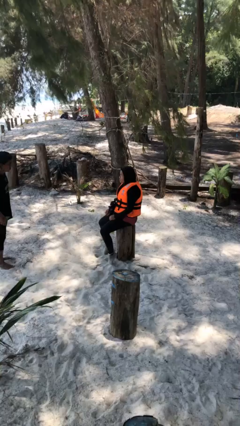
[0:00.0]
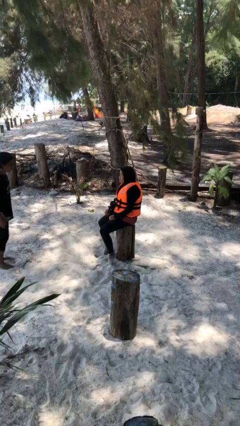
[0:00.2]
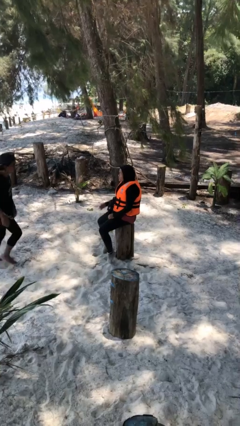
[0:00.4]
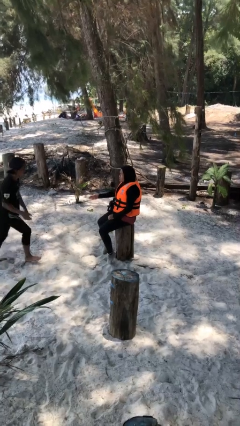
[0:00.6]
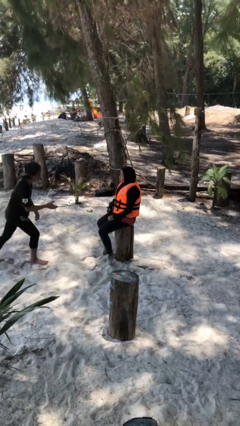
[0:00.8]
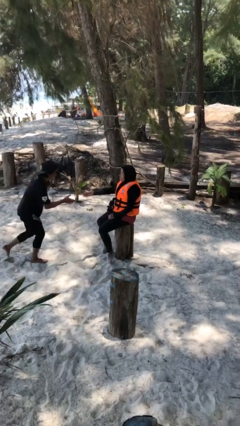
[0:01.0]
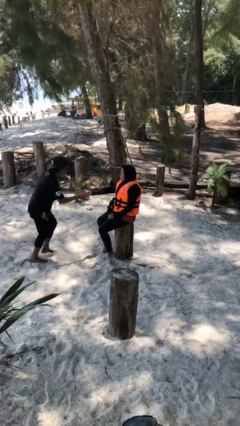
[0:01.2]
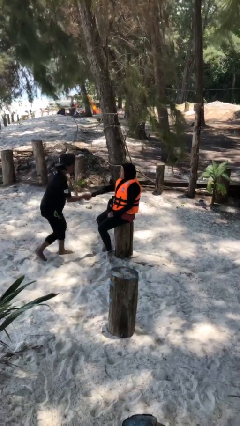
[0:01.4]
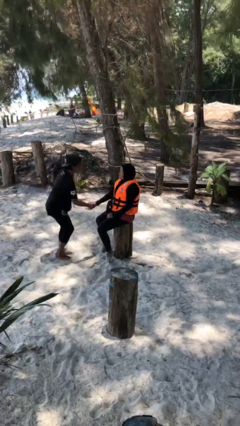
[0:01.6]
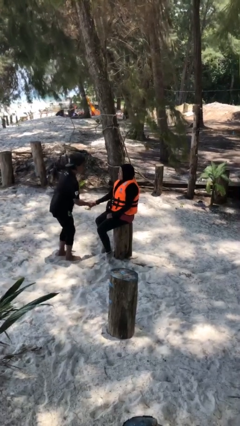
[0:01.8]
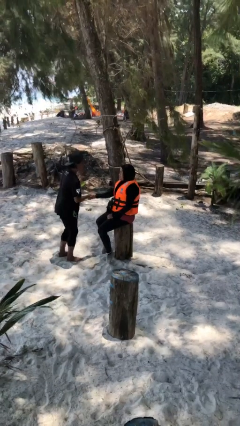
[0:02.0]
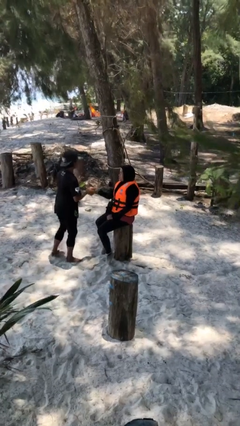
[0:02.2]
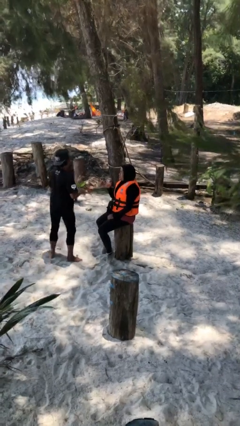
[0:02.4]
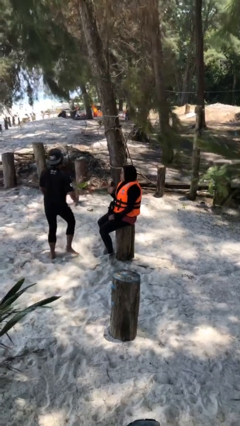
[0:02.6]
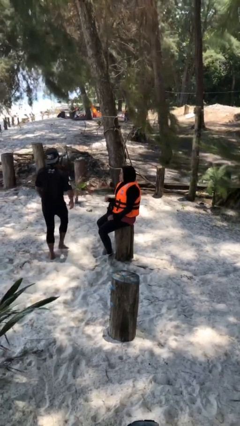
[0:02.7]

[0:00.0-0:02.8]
person shakes hand

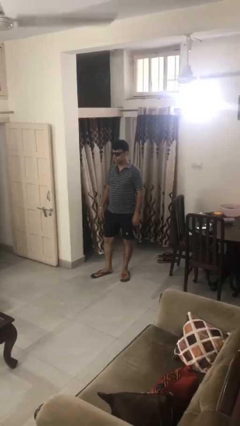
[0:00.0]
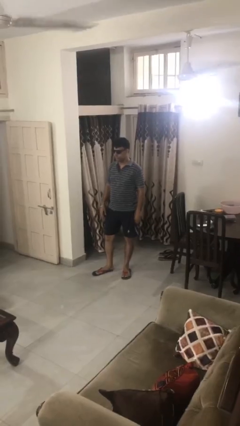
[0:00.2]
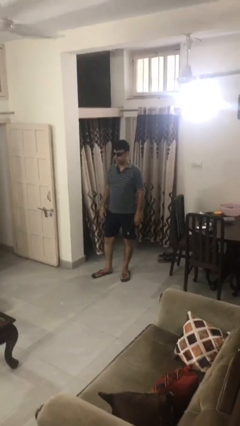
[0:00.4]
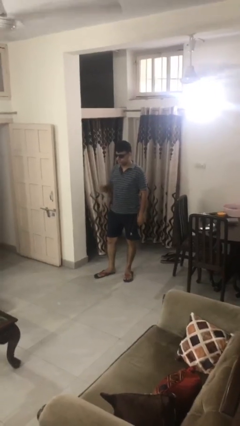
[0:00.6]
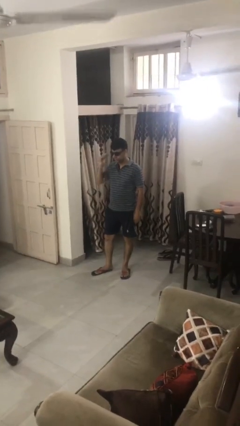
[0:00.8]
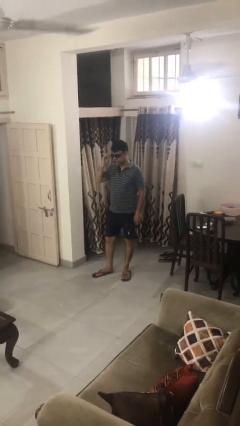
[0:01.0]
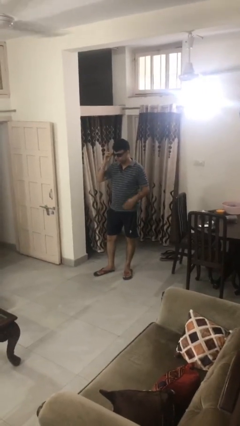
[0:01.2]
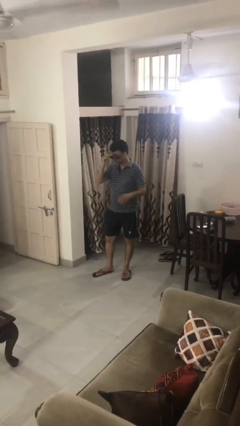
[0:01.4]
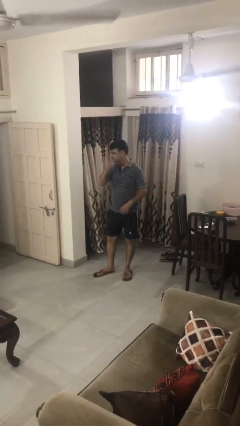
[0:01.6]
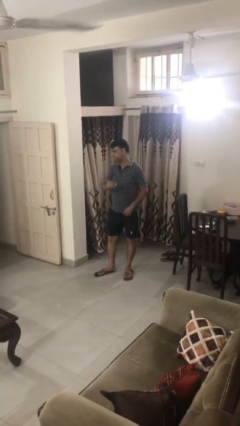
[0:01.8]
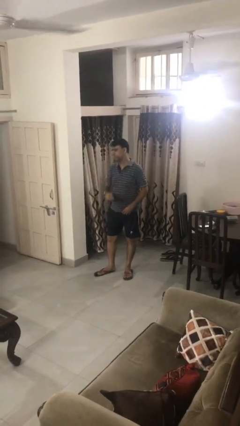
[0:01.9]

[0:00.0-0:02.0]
person takes off sunglasses

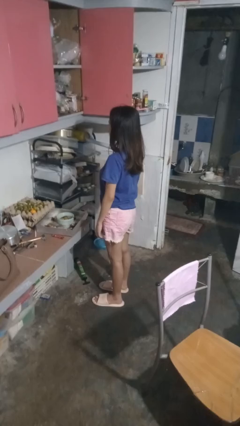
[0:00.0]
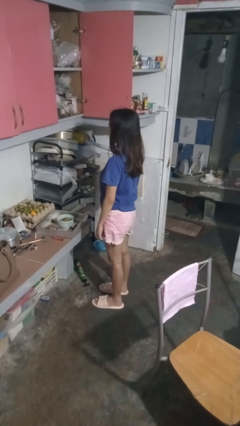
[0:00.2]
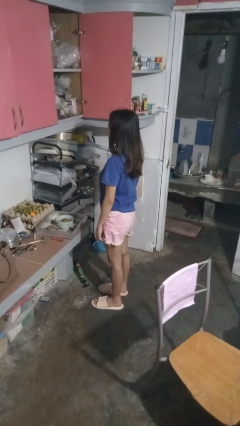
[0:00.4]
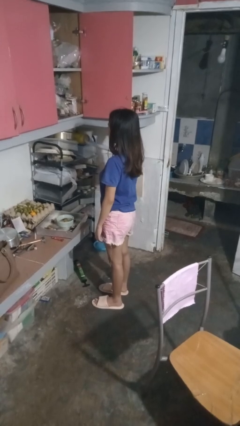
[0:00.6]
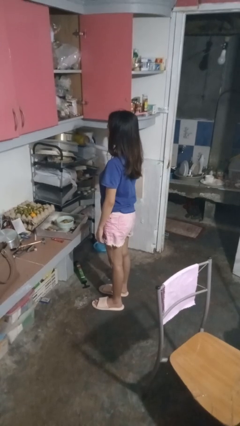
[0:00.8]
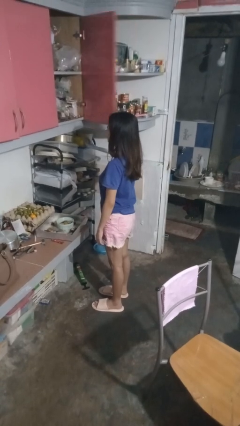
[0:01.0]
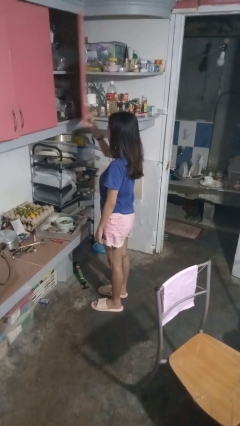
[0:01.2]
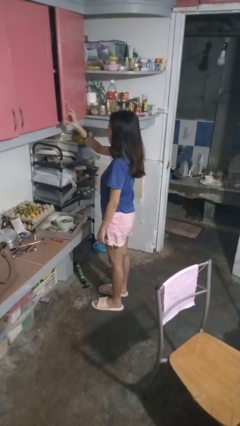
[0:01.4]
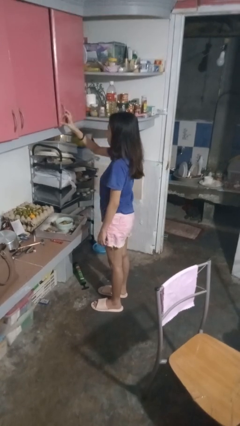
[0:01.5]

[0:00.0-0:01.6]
person closes cabinet

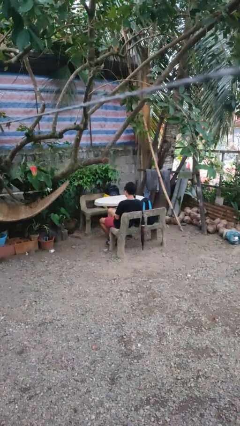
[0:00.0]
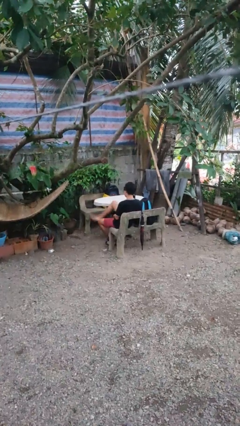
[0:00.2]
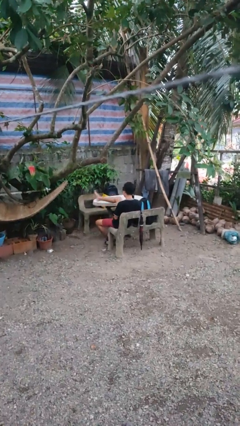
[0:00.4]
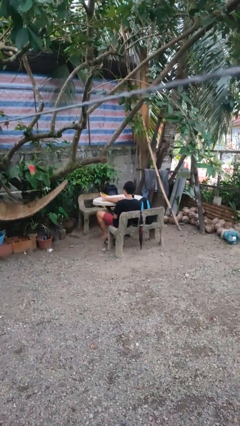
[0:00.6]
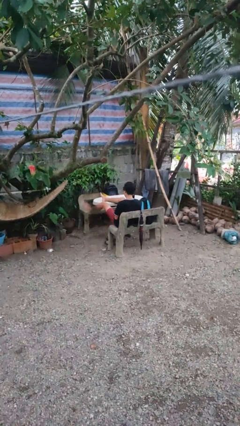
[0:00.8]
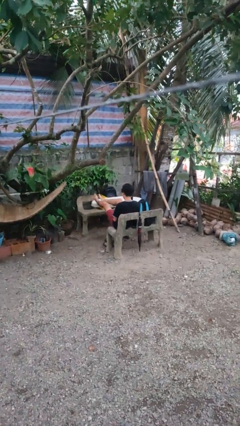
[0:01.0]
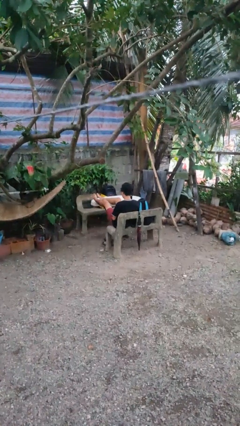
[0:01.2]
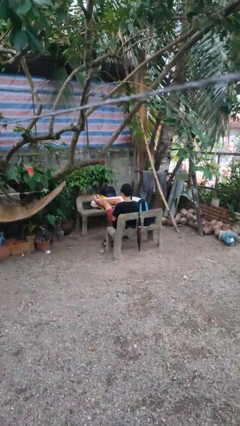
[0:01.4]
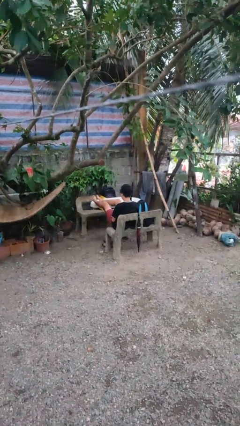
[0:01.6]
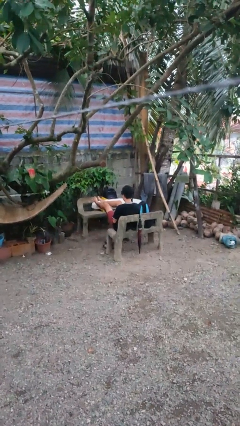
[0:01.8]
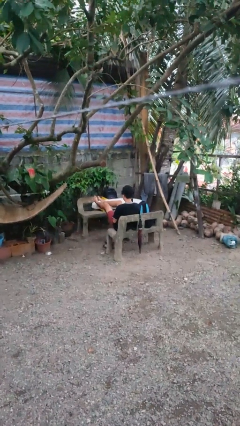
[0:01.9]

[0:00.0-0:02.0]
person puts feet up

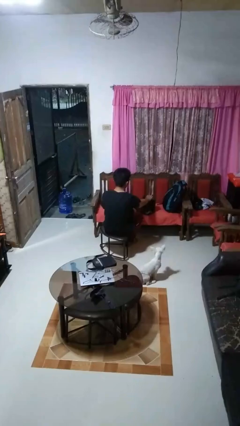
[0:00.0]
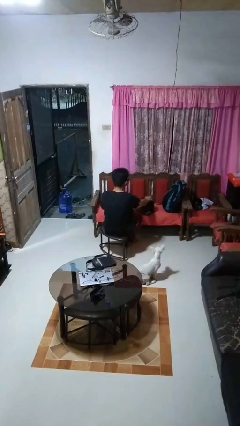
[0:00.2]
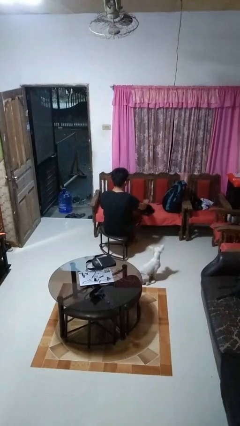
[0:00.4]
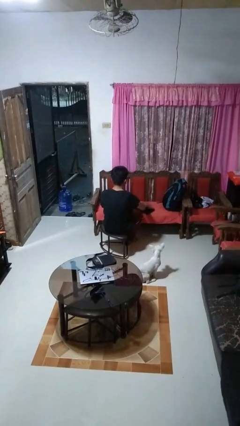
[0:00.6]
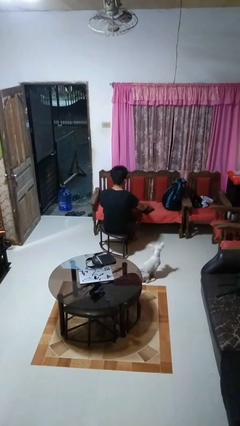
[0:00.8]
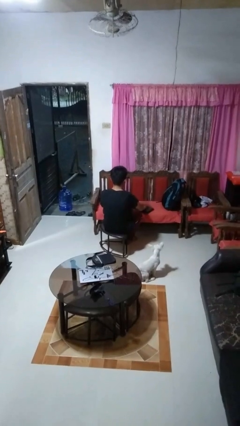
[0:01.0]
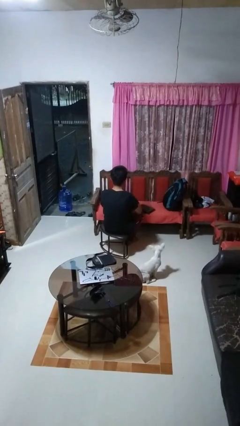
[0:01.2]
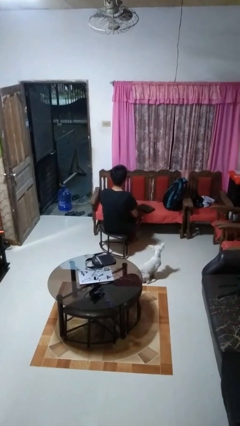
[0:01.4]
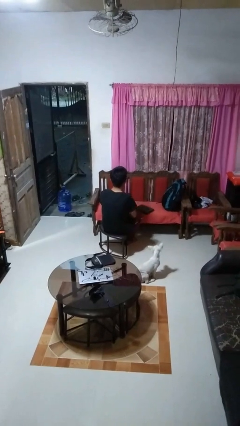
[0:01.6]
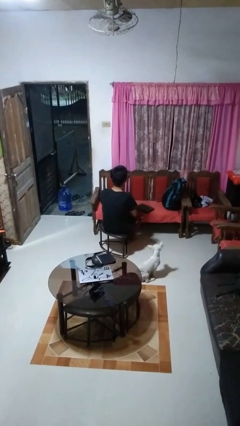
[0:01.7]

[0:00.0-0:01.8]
person closes laptop

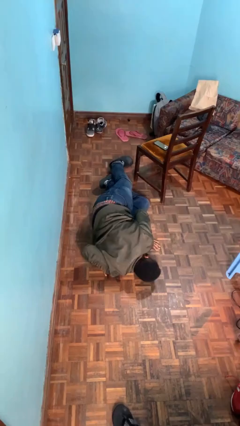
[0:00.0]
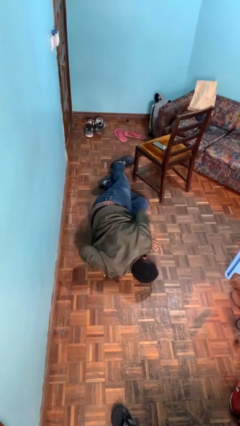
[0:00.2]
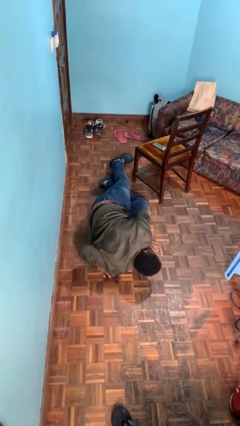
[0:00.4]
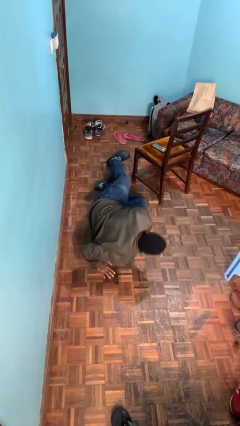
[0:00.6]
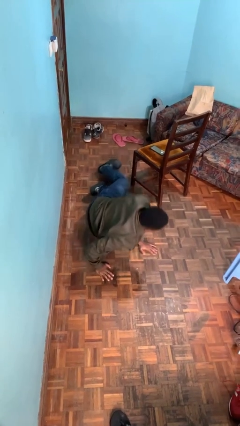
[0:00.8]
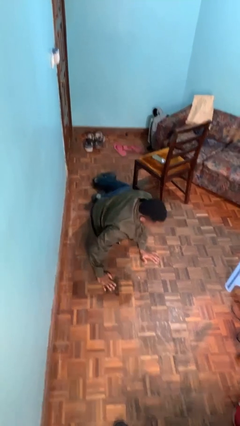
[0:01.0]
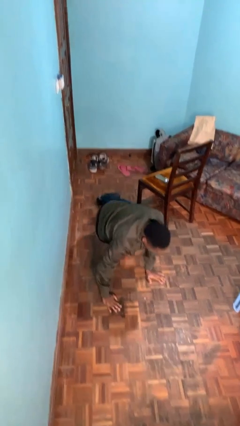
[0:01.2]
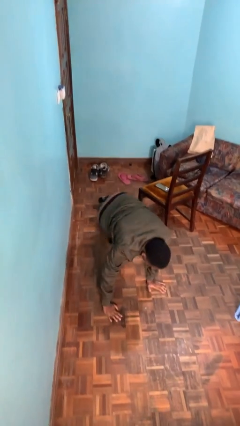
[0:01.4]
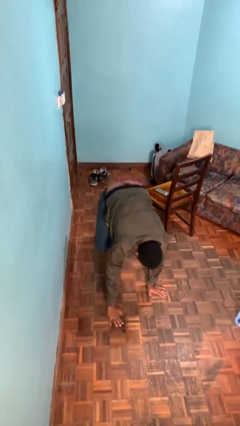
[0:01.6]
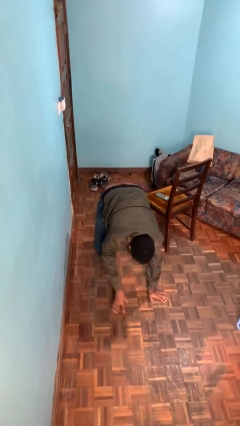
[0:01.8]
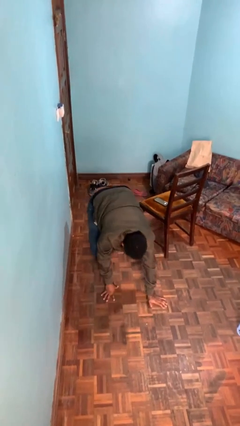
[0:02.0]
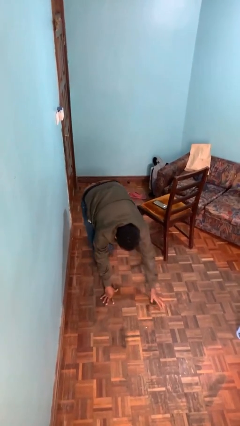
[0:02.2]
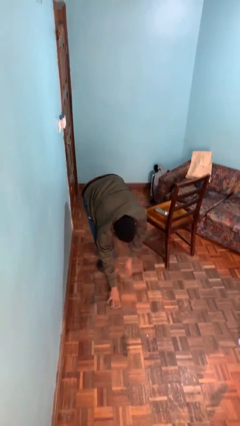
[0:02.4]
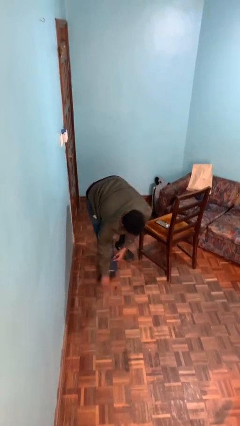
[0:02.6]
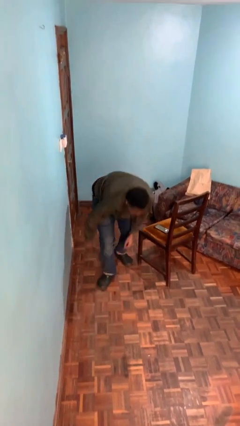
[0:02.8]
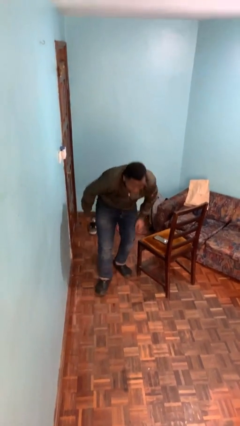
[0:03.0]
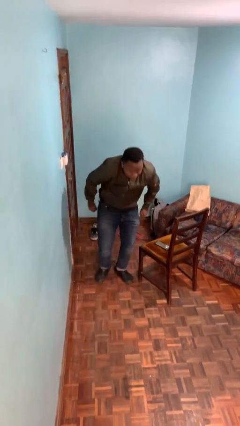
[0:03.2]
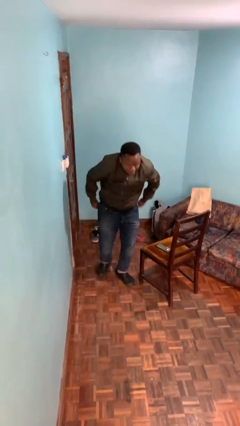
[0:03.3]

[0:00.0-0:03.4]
person stands up from floor

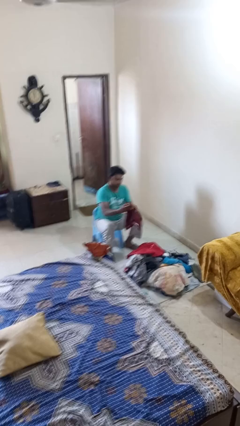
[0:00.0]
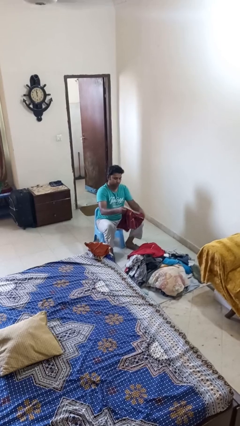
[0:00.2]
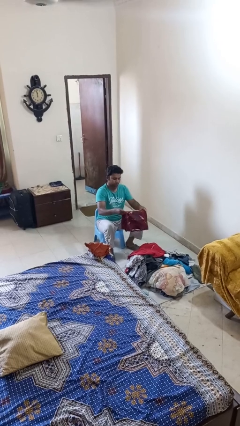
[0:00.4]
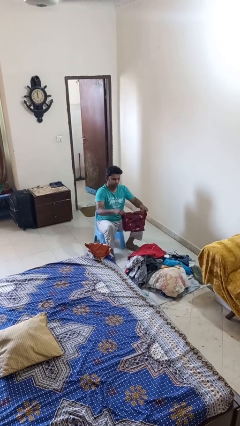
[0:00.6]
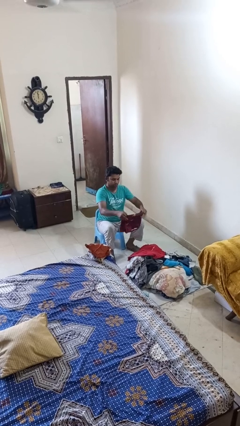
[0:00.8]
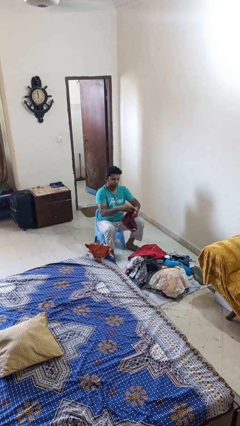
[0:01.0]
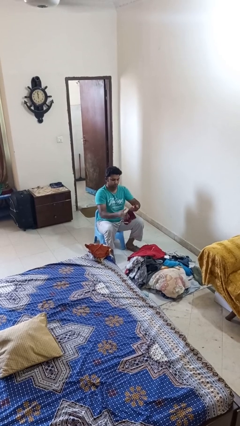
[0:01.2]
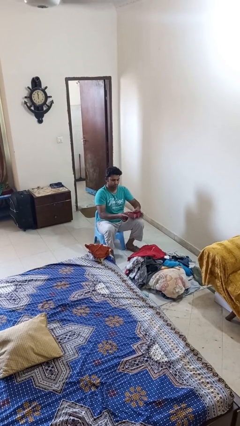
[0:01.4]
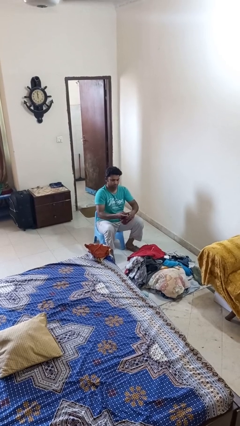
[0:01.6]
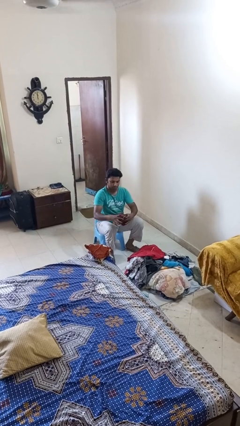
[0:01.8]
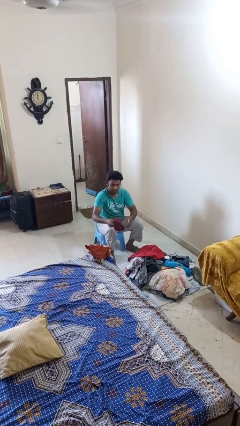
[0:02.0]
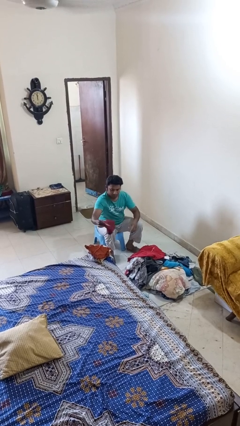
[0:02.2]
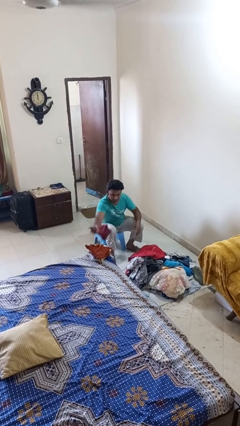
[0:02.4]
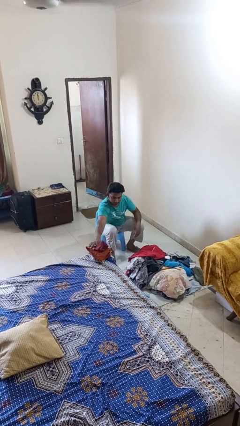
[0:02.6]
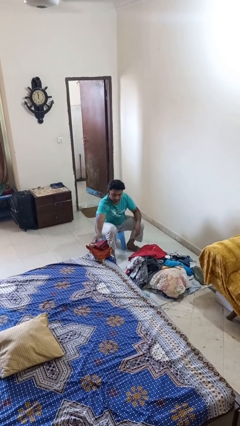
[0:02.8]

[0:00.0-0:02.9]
person folds shirt

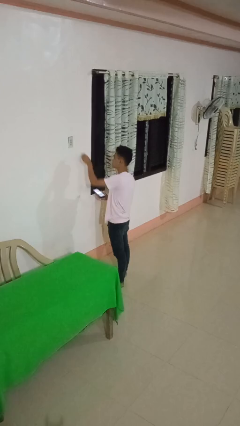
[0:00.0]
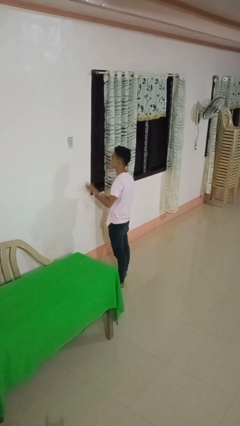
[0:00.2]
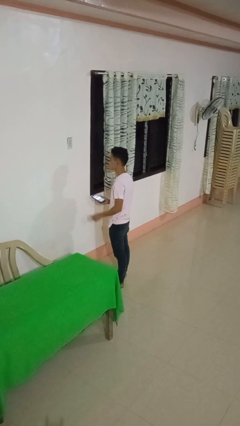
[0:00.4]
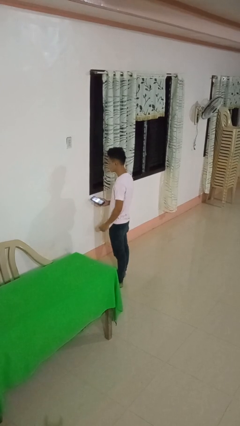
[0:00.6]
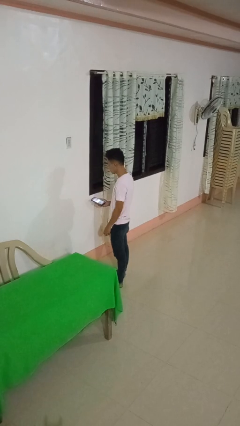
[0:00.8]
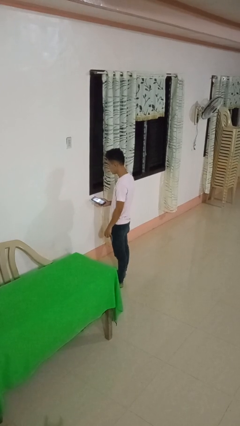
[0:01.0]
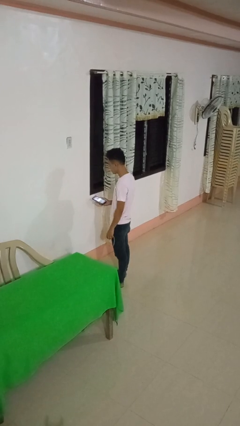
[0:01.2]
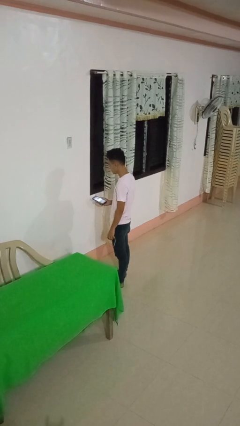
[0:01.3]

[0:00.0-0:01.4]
person unplugs from electrical socket
